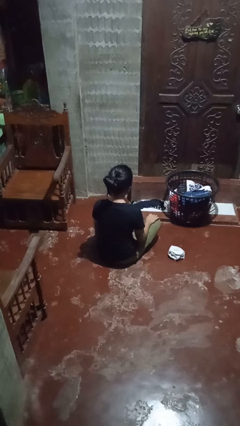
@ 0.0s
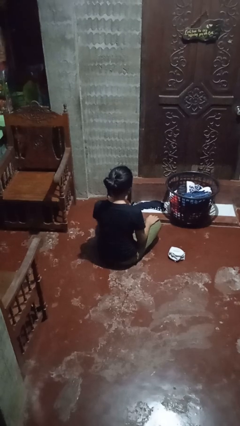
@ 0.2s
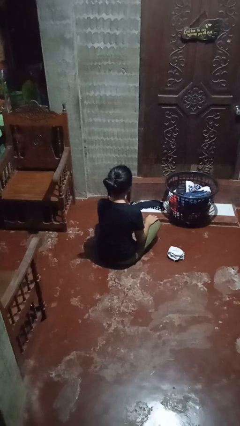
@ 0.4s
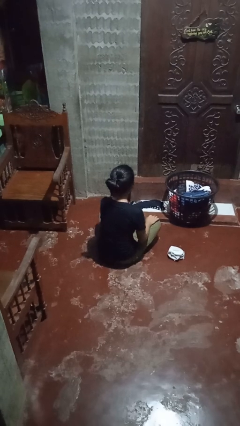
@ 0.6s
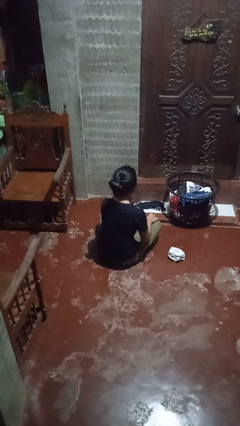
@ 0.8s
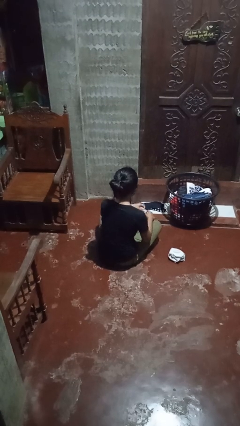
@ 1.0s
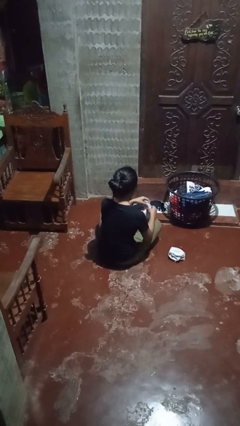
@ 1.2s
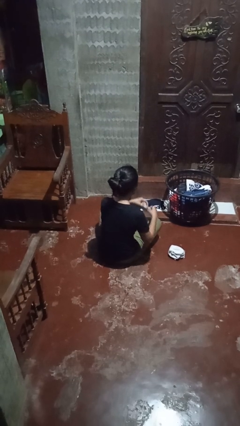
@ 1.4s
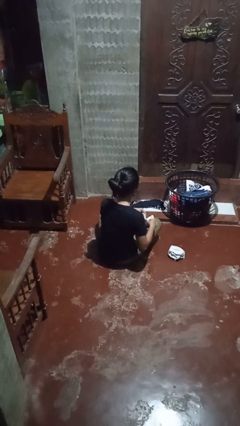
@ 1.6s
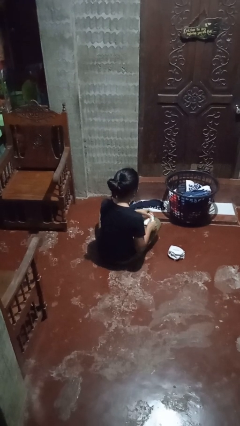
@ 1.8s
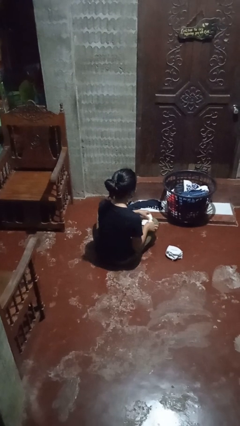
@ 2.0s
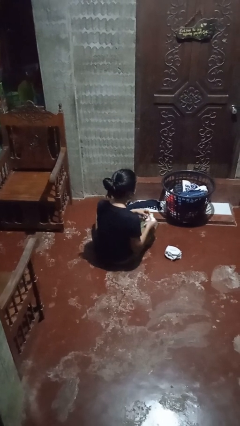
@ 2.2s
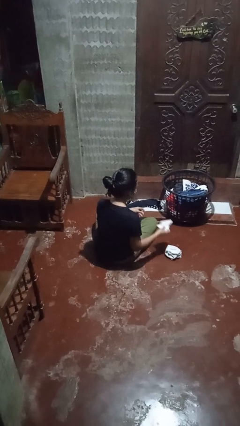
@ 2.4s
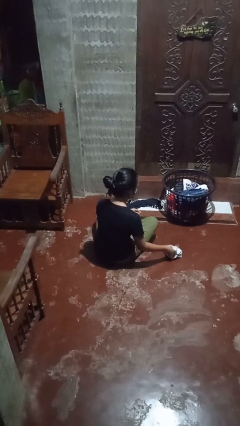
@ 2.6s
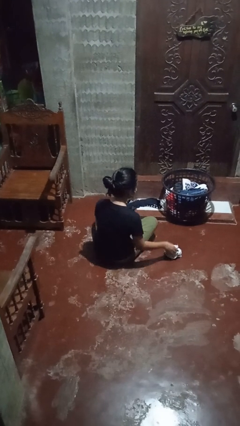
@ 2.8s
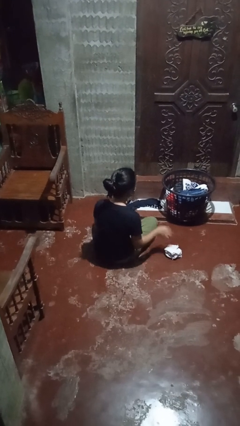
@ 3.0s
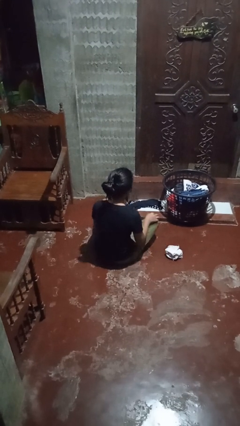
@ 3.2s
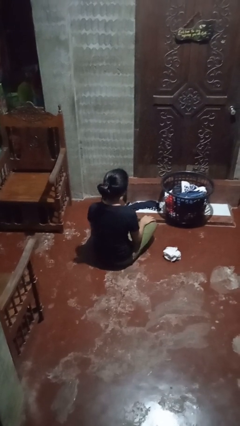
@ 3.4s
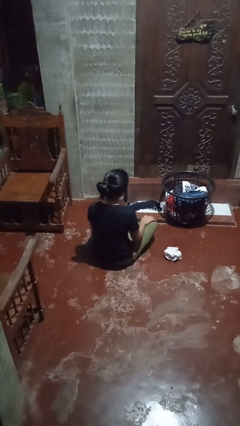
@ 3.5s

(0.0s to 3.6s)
person folds socks

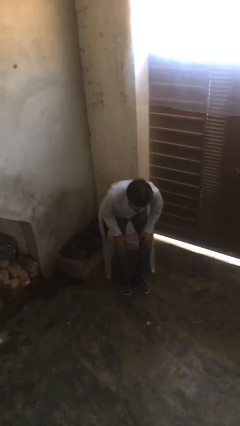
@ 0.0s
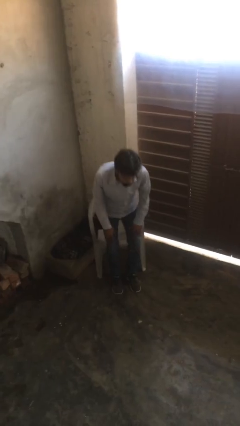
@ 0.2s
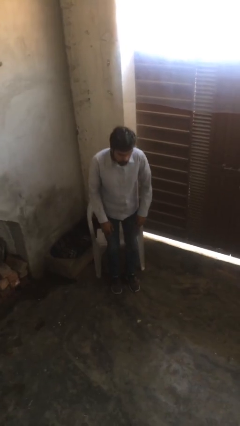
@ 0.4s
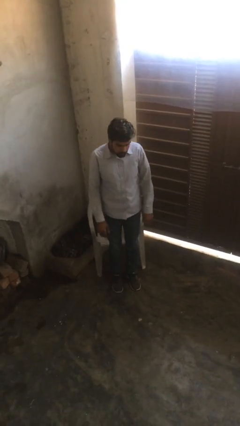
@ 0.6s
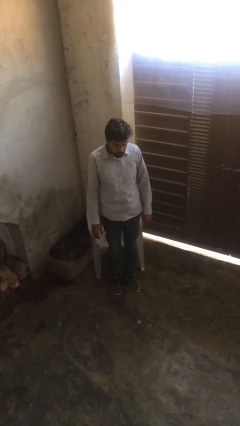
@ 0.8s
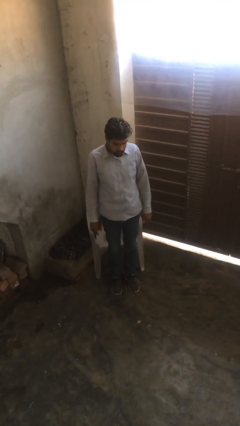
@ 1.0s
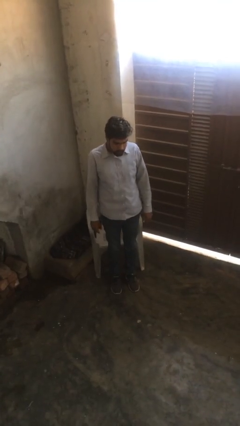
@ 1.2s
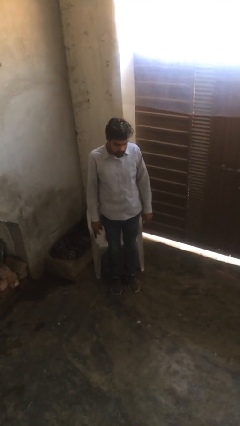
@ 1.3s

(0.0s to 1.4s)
person stands up

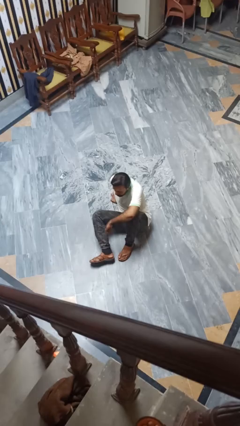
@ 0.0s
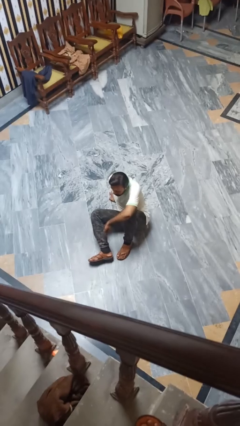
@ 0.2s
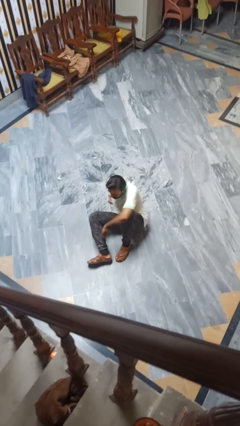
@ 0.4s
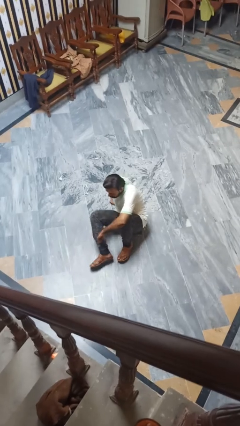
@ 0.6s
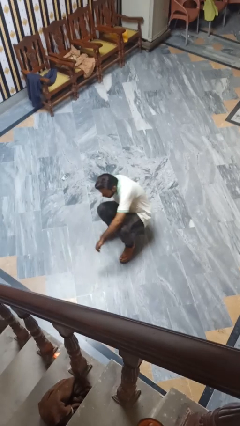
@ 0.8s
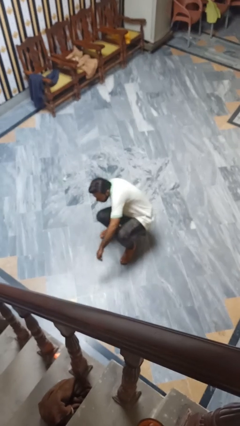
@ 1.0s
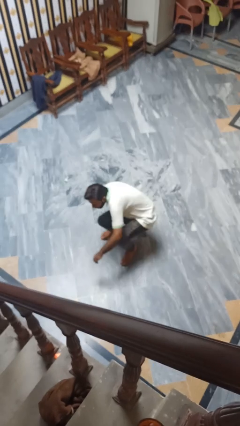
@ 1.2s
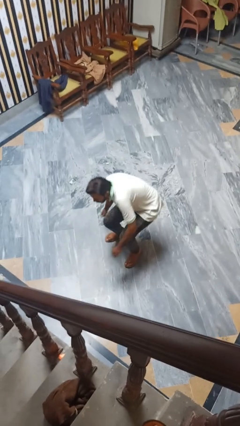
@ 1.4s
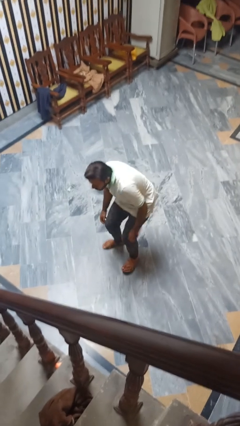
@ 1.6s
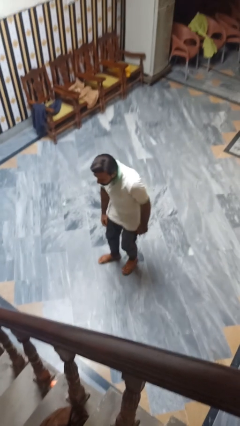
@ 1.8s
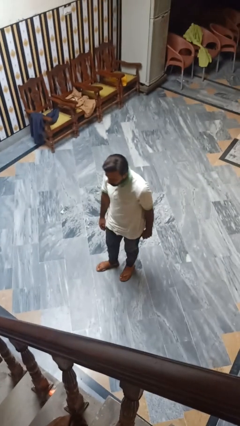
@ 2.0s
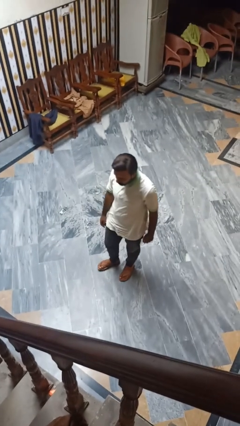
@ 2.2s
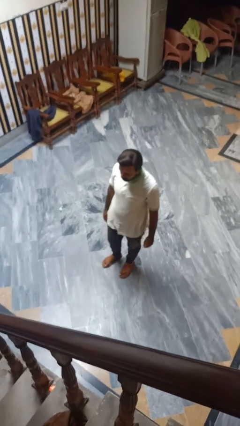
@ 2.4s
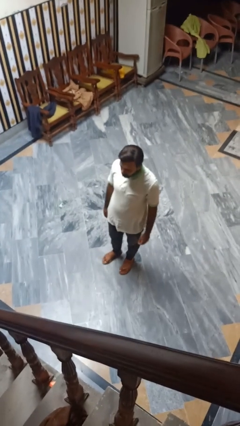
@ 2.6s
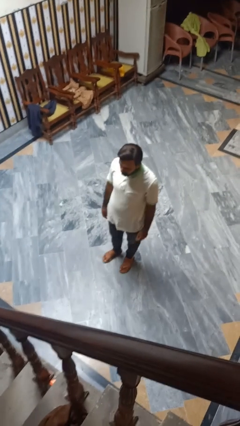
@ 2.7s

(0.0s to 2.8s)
person stands up from floor

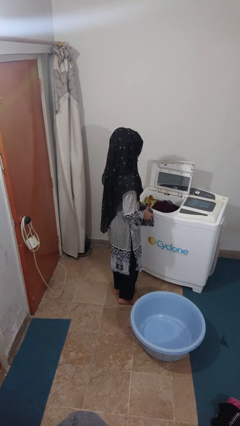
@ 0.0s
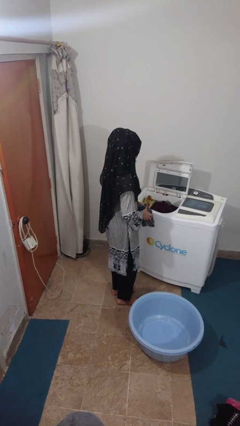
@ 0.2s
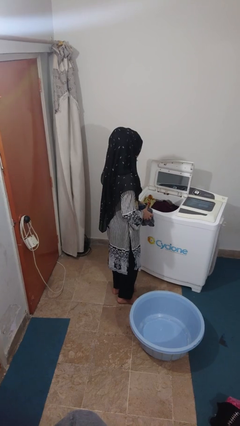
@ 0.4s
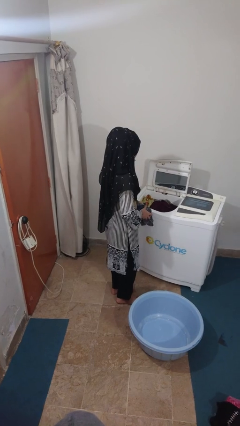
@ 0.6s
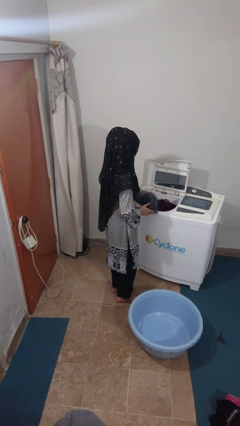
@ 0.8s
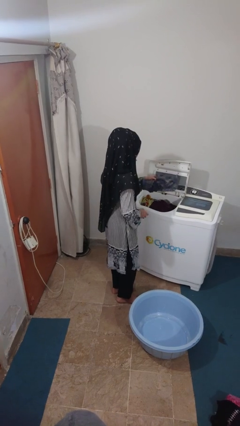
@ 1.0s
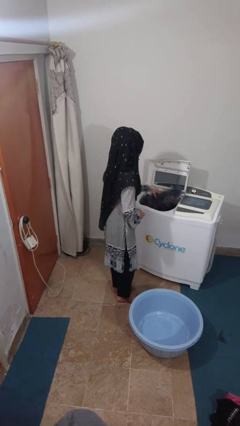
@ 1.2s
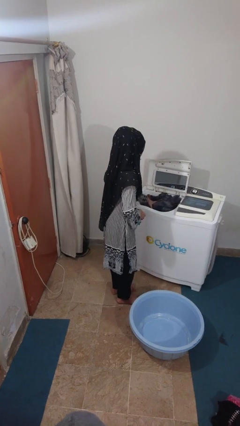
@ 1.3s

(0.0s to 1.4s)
person loads clotheswasher

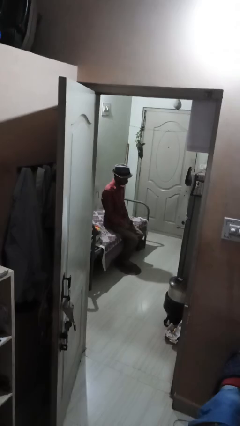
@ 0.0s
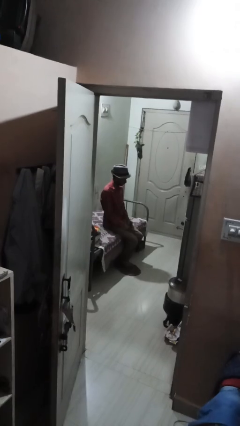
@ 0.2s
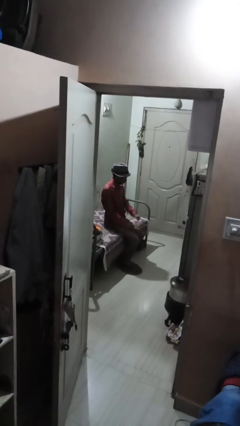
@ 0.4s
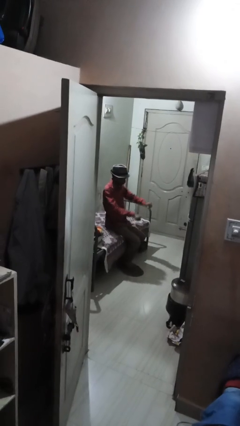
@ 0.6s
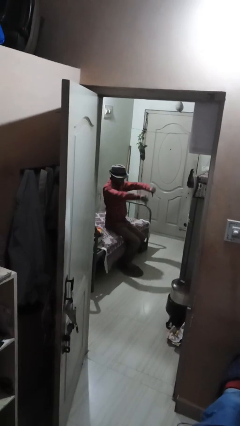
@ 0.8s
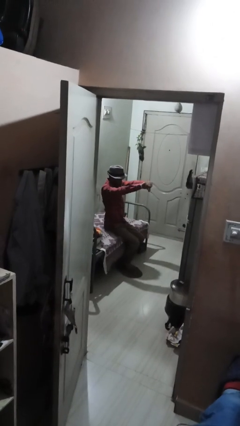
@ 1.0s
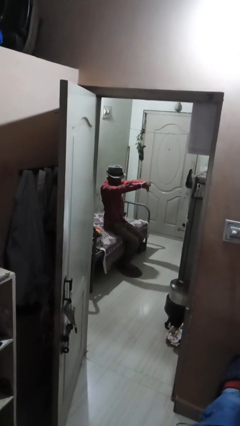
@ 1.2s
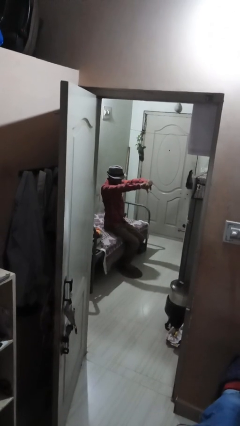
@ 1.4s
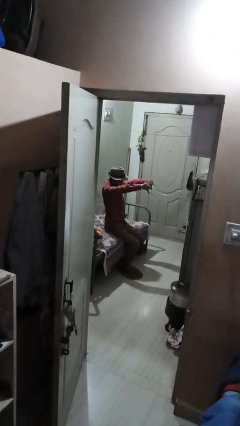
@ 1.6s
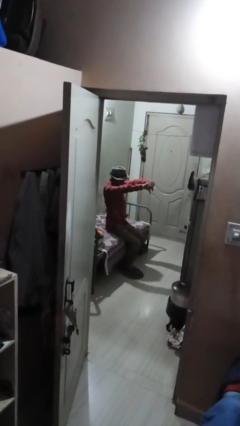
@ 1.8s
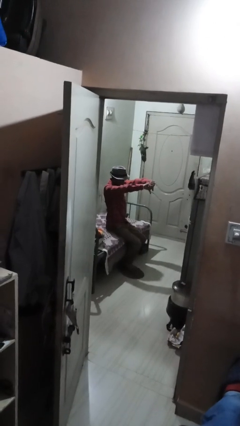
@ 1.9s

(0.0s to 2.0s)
person gestures thumbs down

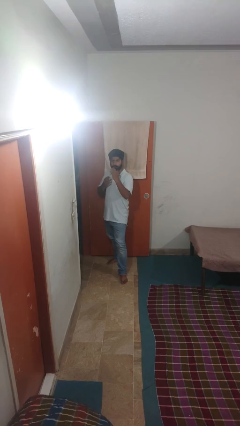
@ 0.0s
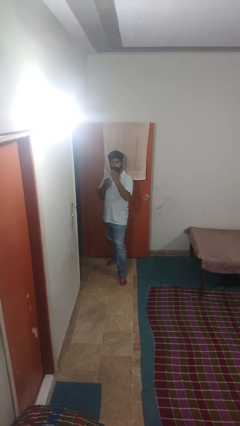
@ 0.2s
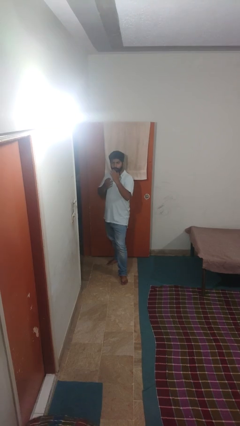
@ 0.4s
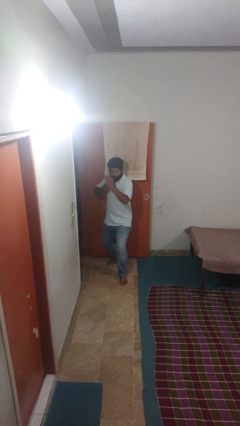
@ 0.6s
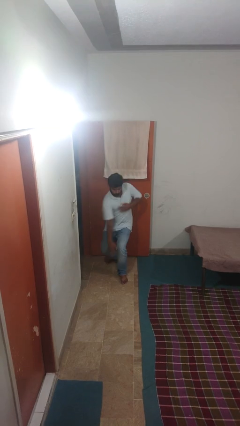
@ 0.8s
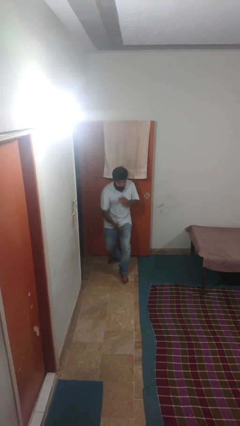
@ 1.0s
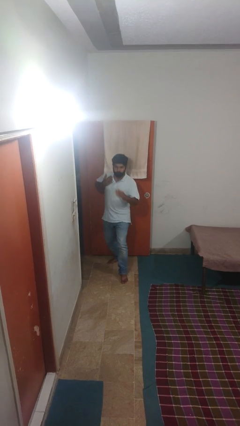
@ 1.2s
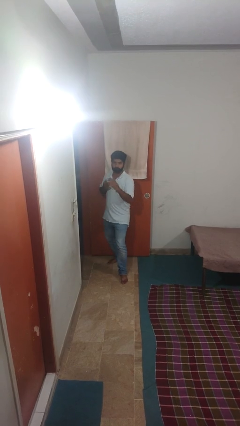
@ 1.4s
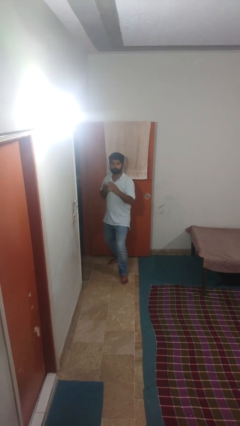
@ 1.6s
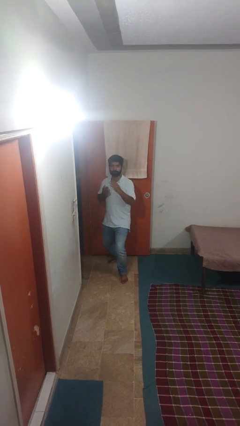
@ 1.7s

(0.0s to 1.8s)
person karate chop

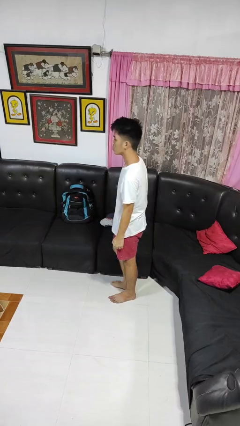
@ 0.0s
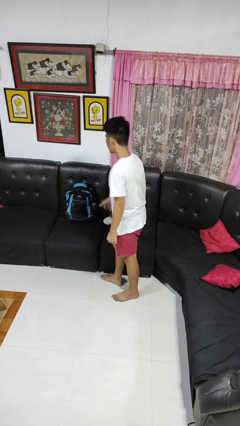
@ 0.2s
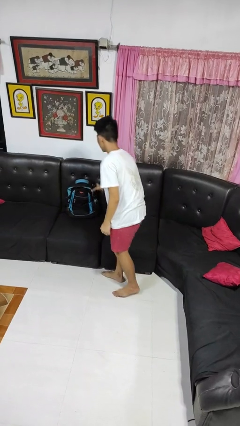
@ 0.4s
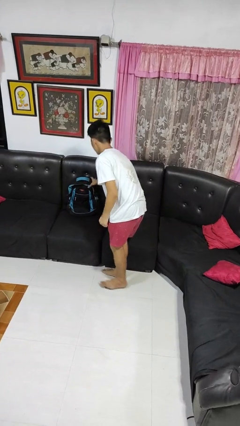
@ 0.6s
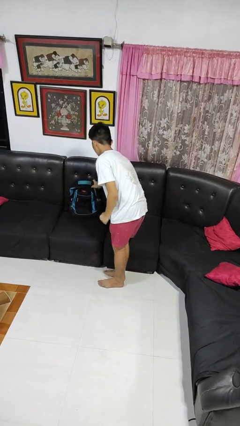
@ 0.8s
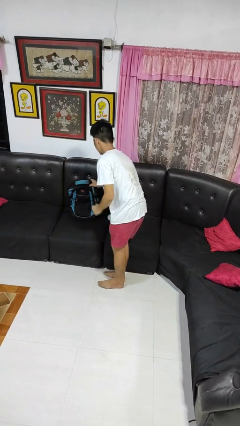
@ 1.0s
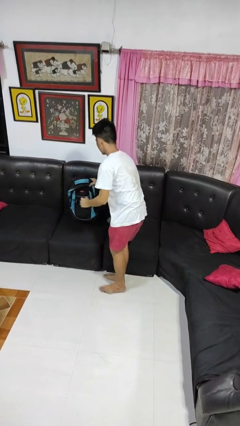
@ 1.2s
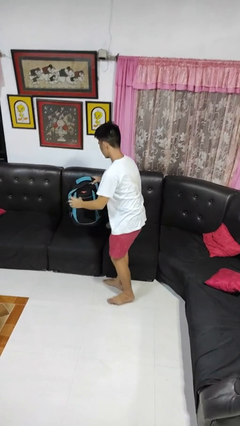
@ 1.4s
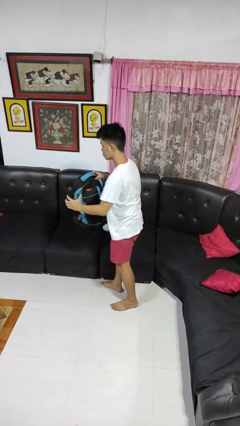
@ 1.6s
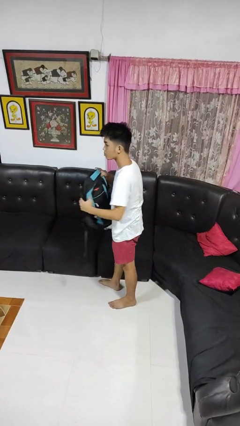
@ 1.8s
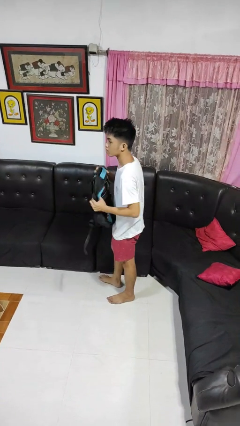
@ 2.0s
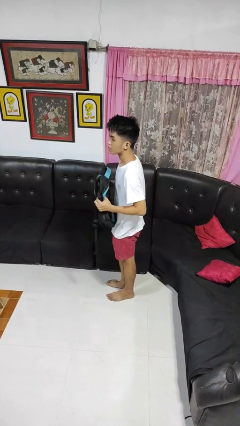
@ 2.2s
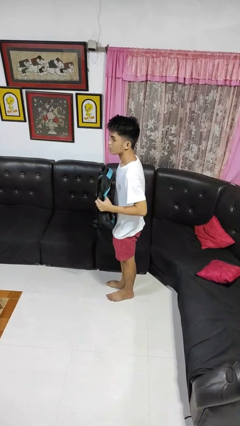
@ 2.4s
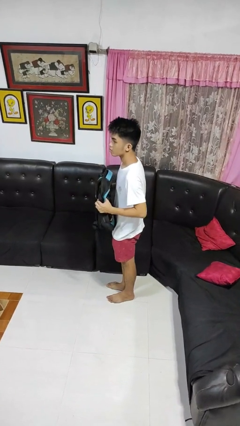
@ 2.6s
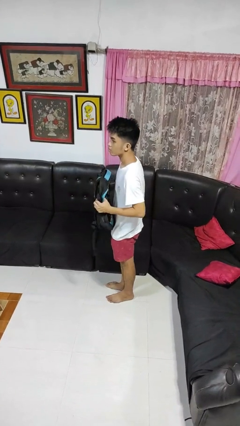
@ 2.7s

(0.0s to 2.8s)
person picks up object from couch

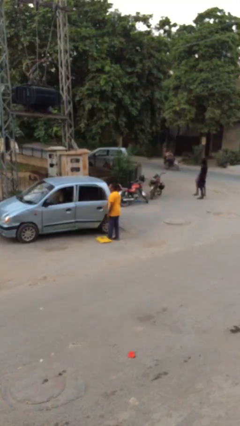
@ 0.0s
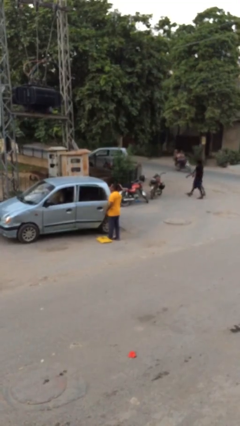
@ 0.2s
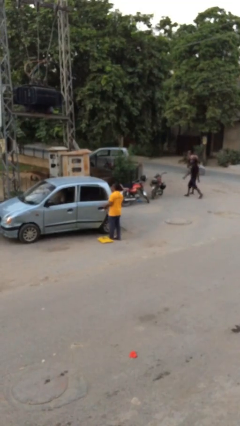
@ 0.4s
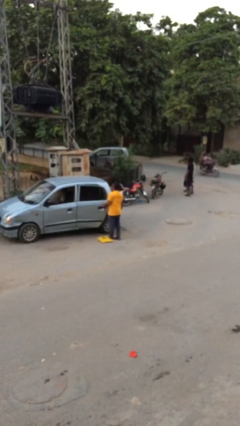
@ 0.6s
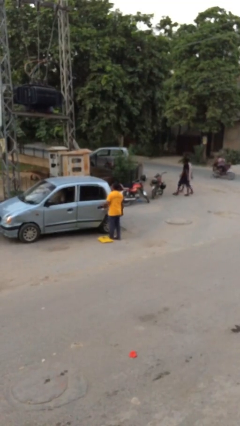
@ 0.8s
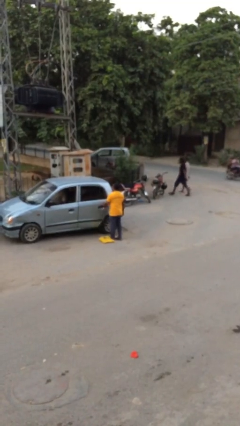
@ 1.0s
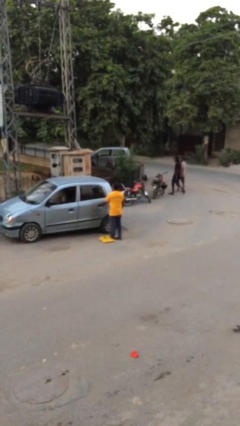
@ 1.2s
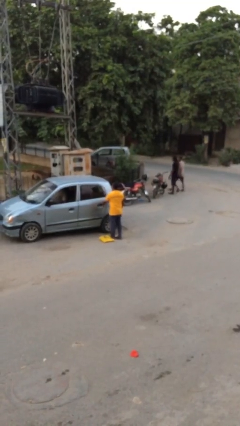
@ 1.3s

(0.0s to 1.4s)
person closes car door
